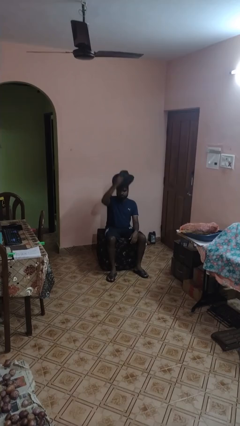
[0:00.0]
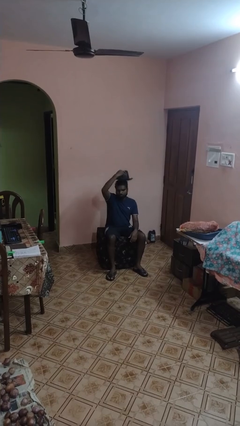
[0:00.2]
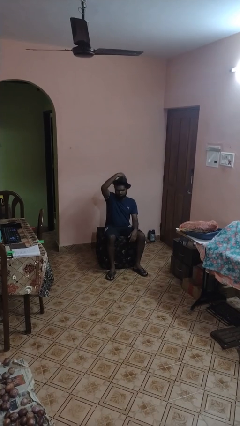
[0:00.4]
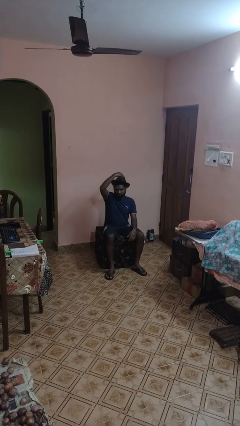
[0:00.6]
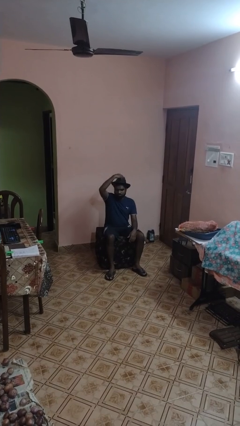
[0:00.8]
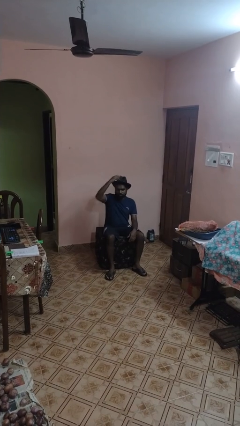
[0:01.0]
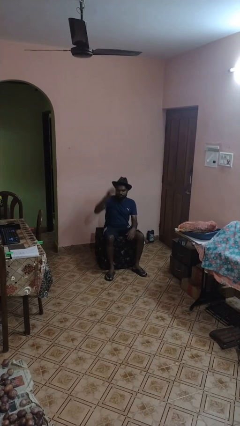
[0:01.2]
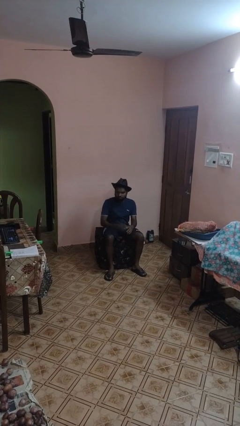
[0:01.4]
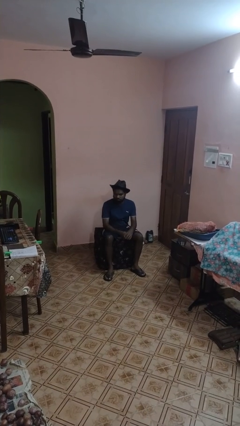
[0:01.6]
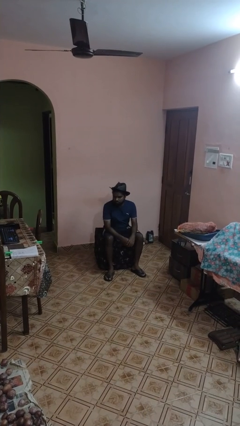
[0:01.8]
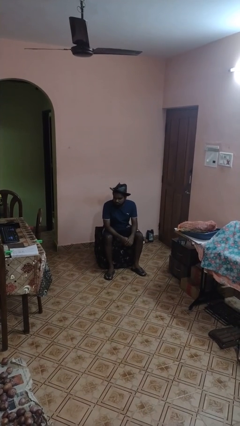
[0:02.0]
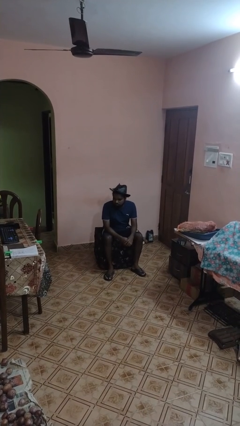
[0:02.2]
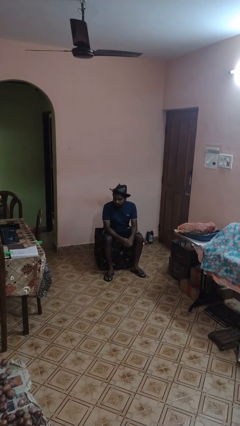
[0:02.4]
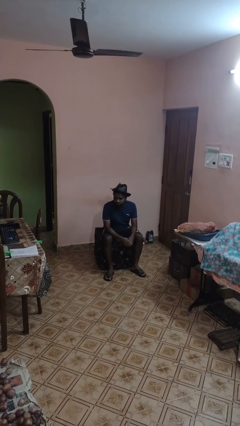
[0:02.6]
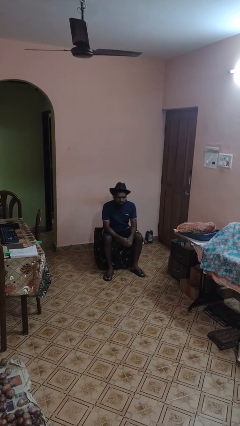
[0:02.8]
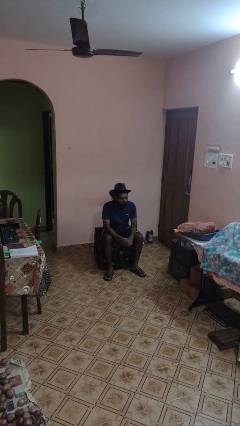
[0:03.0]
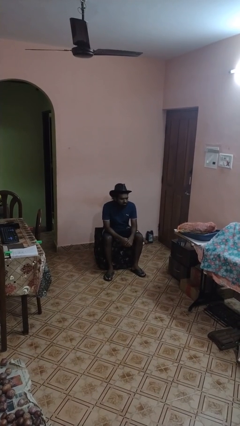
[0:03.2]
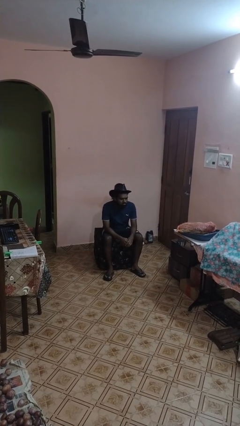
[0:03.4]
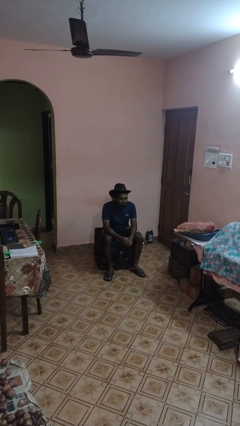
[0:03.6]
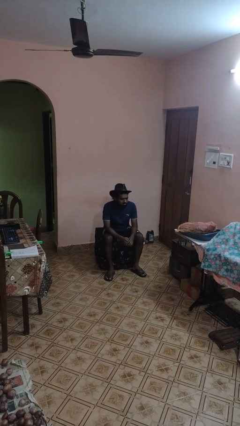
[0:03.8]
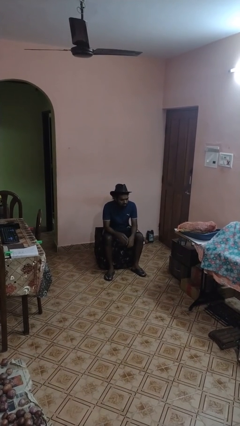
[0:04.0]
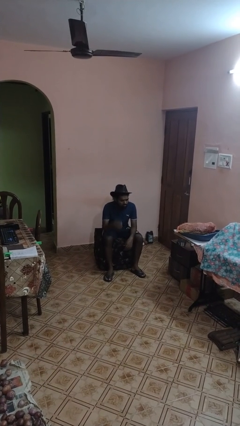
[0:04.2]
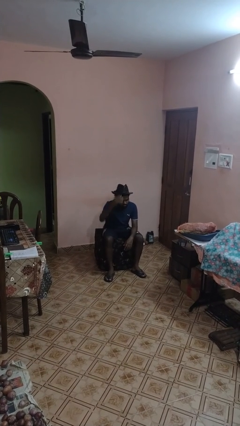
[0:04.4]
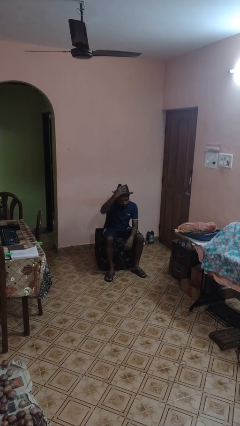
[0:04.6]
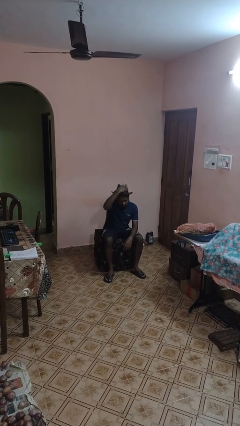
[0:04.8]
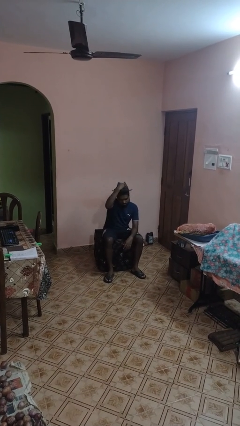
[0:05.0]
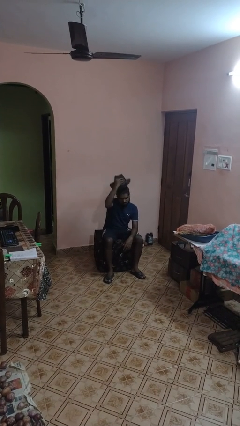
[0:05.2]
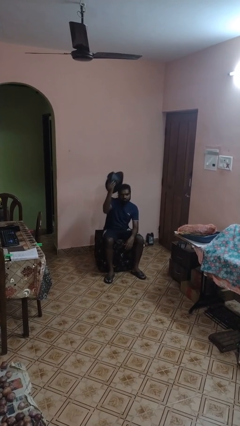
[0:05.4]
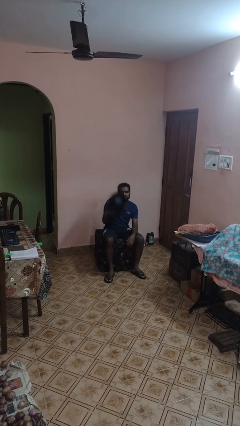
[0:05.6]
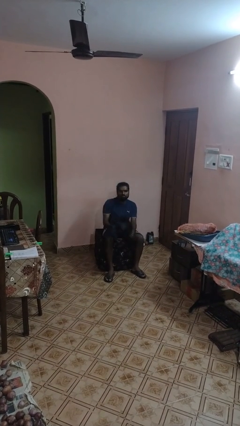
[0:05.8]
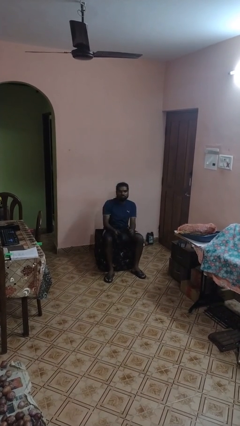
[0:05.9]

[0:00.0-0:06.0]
person puts on hat

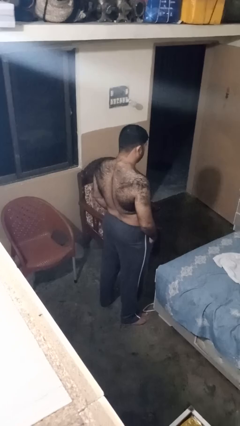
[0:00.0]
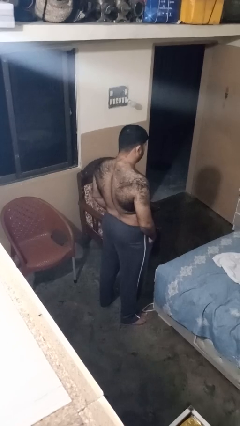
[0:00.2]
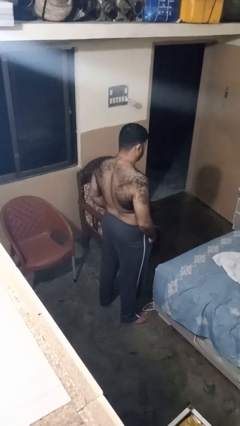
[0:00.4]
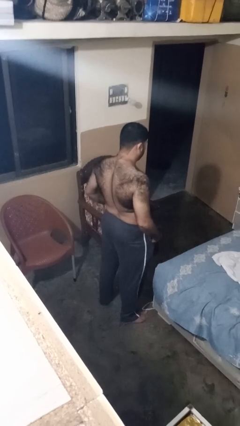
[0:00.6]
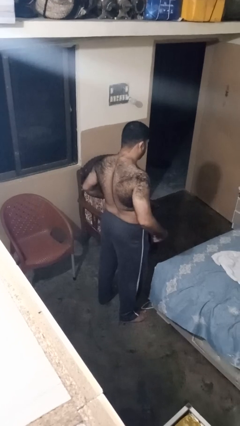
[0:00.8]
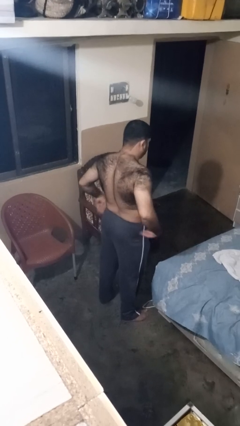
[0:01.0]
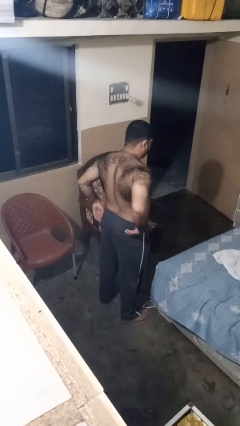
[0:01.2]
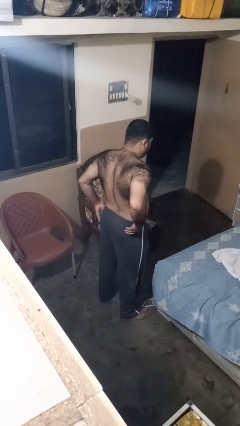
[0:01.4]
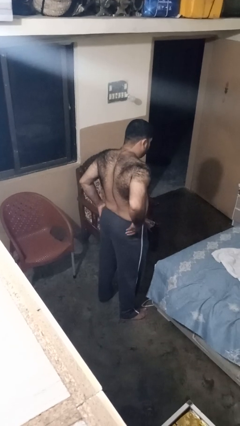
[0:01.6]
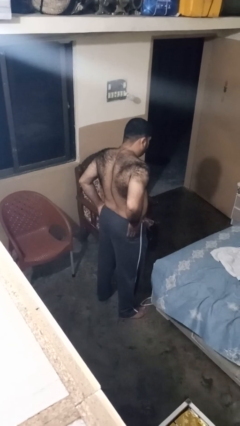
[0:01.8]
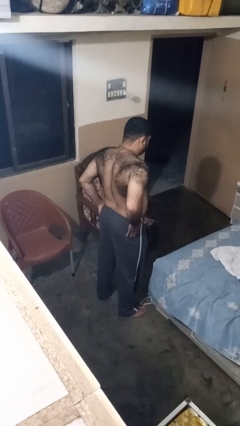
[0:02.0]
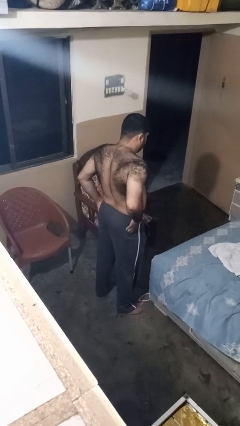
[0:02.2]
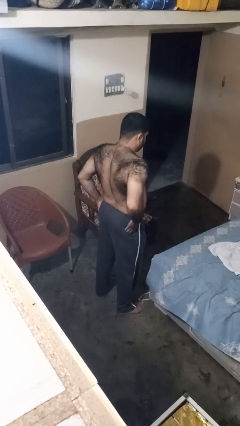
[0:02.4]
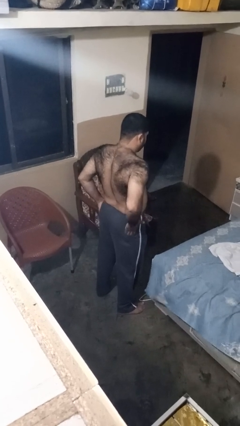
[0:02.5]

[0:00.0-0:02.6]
person puts hands in back pockets

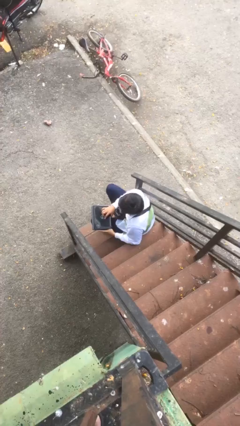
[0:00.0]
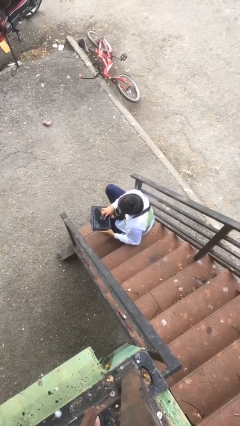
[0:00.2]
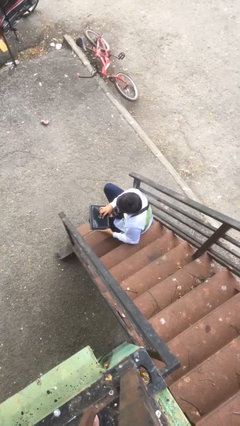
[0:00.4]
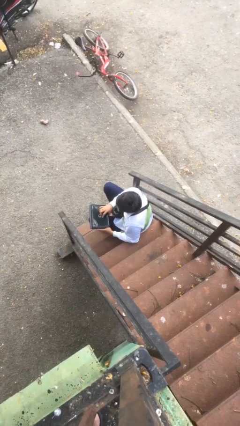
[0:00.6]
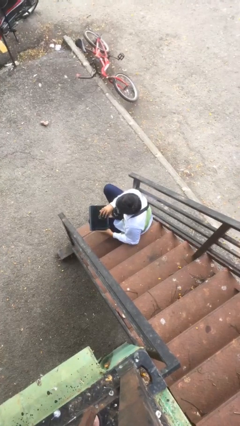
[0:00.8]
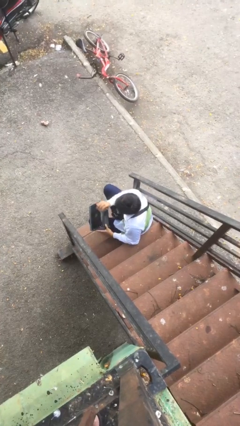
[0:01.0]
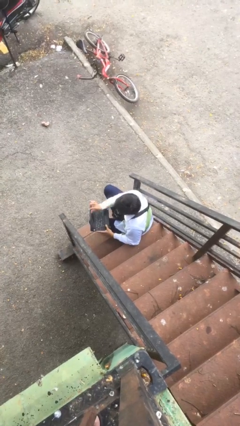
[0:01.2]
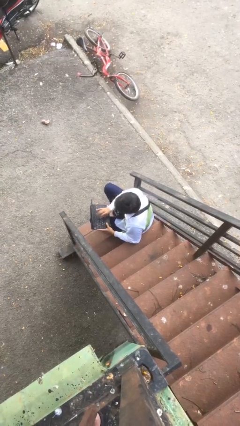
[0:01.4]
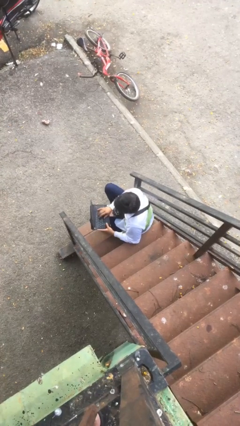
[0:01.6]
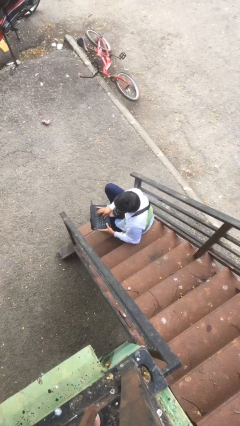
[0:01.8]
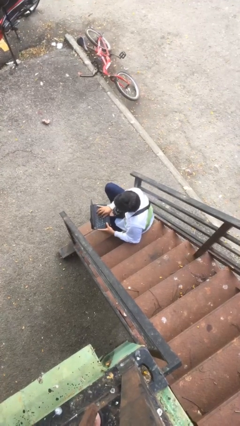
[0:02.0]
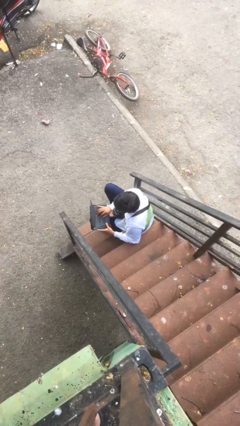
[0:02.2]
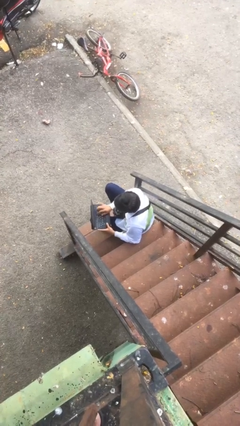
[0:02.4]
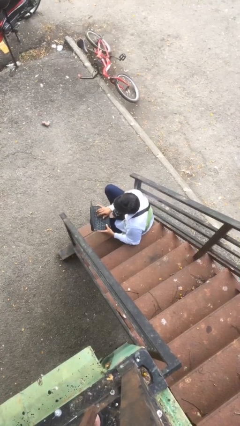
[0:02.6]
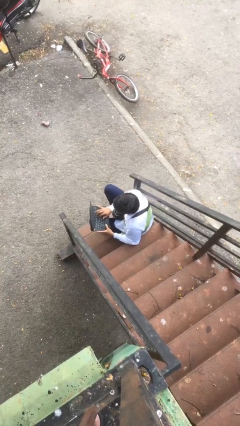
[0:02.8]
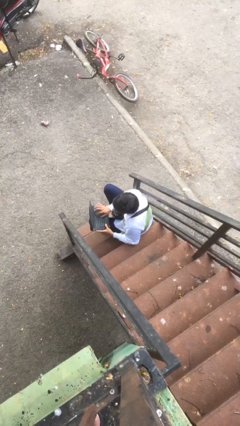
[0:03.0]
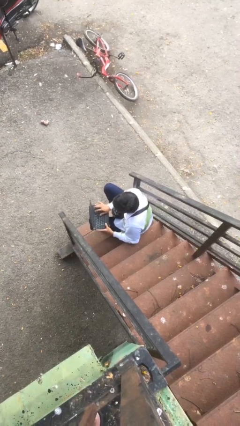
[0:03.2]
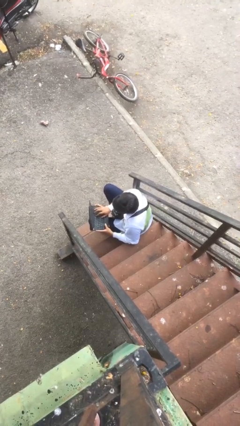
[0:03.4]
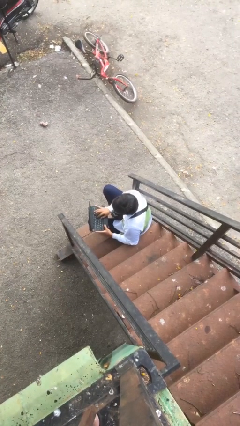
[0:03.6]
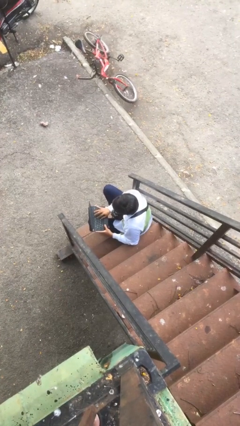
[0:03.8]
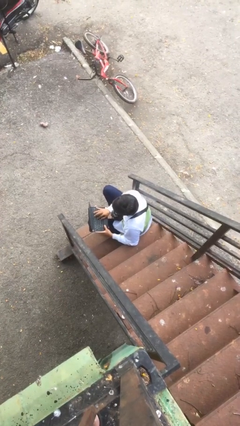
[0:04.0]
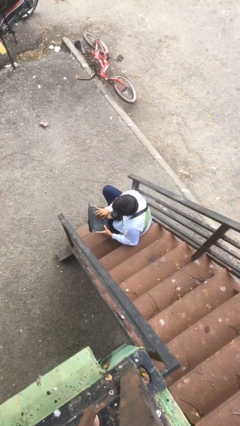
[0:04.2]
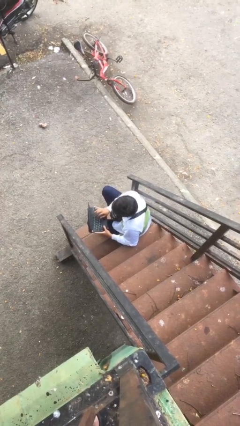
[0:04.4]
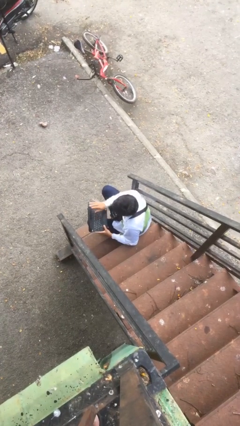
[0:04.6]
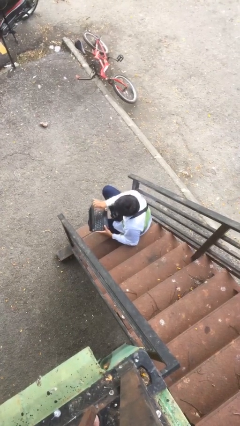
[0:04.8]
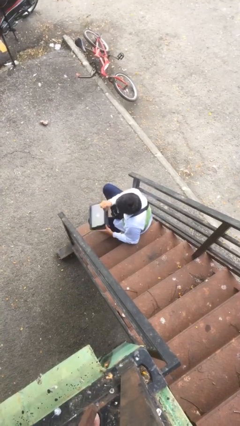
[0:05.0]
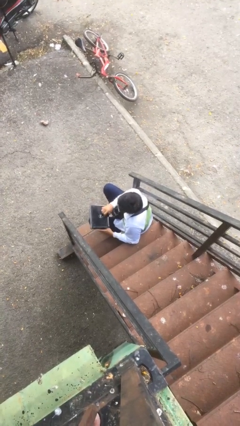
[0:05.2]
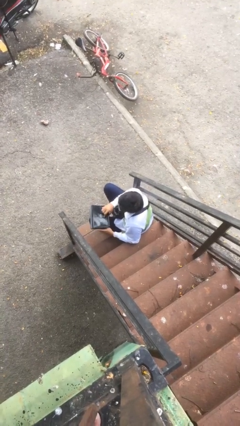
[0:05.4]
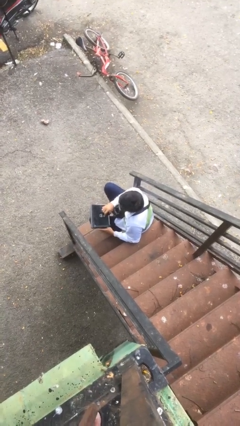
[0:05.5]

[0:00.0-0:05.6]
person interacts with laptop

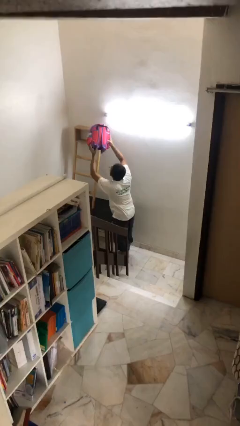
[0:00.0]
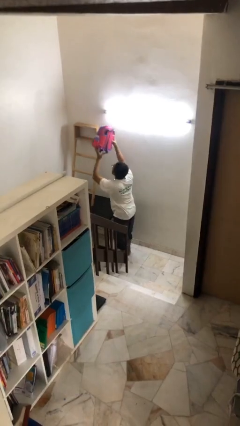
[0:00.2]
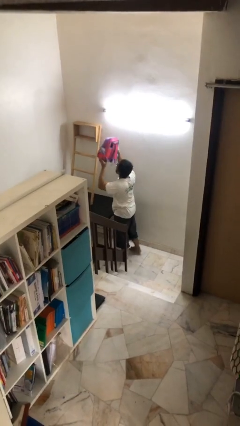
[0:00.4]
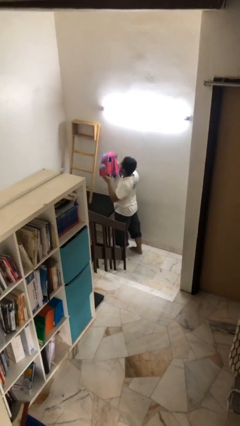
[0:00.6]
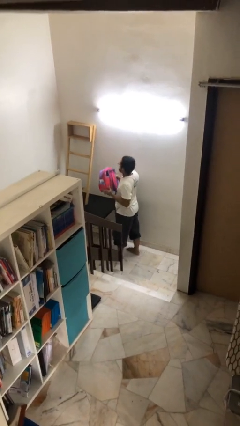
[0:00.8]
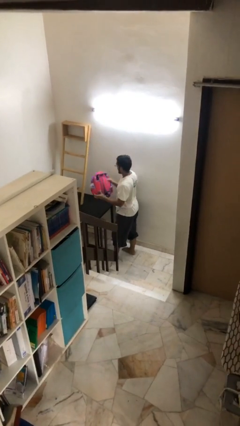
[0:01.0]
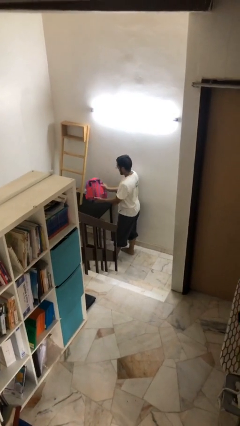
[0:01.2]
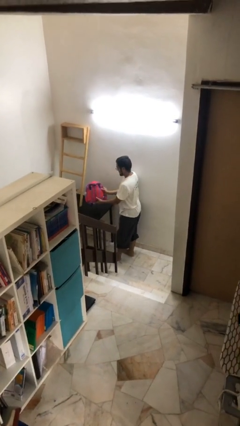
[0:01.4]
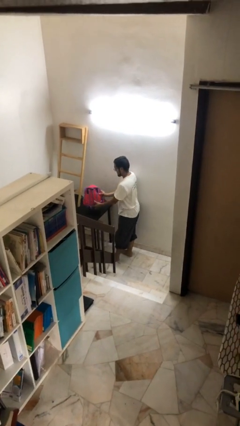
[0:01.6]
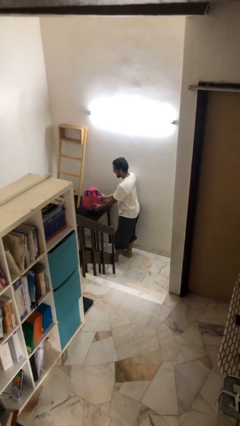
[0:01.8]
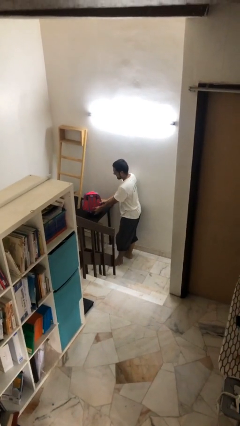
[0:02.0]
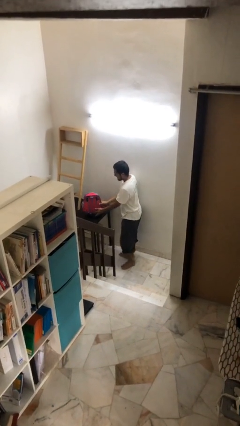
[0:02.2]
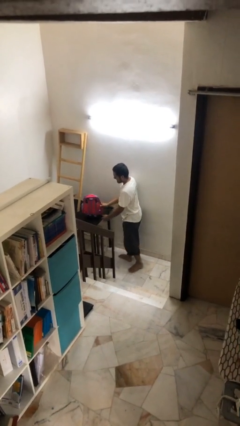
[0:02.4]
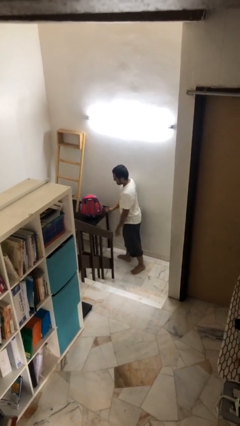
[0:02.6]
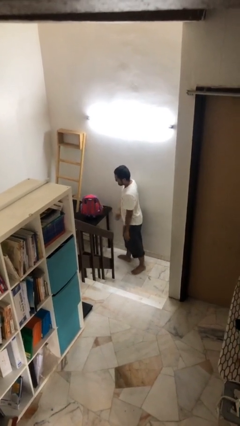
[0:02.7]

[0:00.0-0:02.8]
person puts down object on table

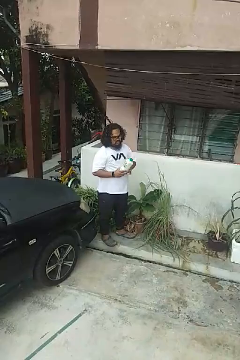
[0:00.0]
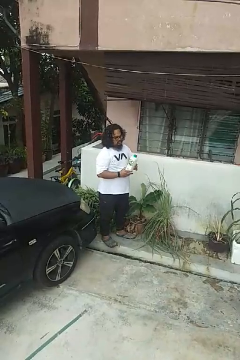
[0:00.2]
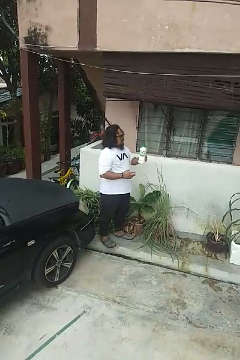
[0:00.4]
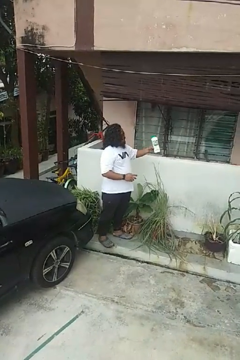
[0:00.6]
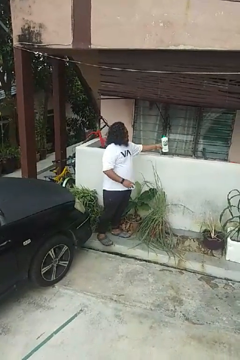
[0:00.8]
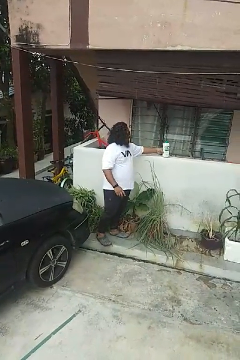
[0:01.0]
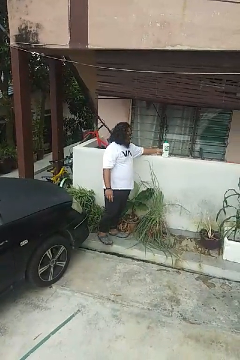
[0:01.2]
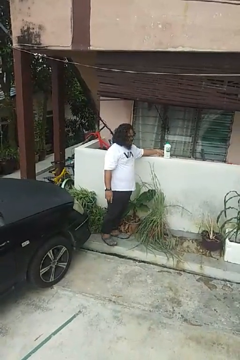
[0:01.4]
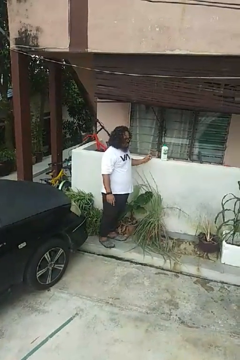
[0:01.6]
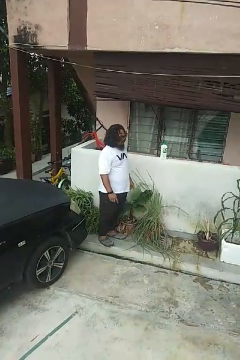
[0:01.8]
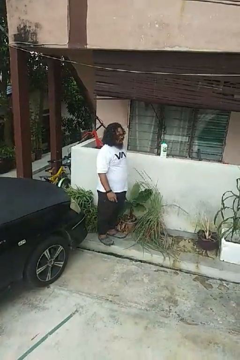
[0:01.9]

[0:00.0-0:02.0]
person puts down object on countertop
